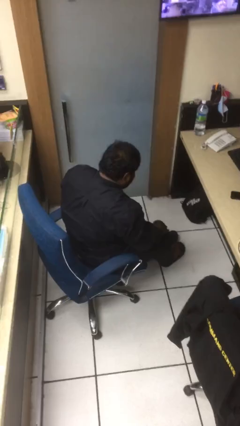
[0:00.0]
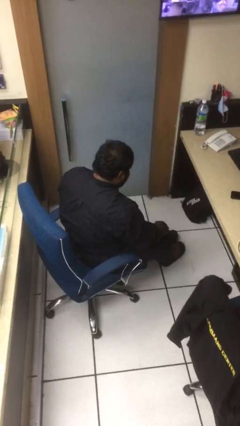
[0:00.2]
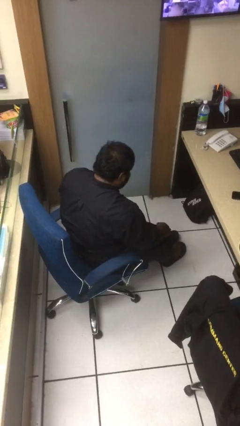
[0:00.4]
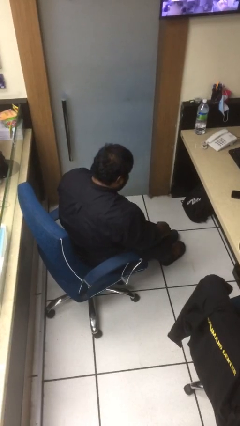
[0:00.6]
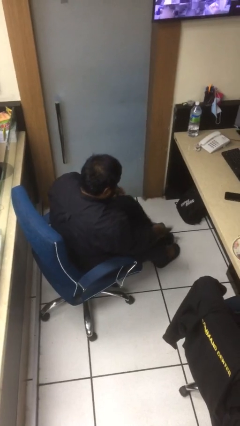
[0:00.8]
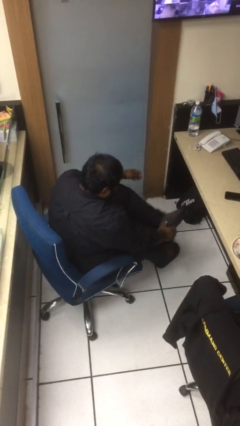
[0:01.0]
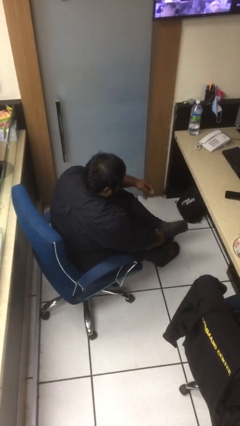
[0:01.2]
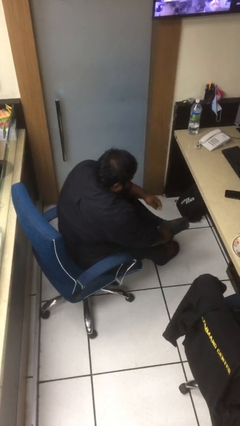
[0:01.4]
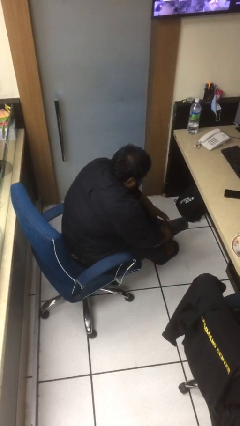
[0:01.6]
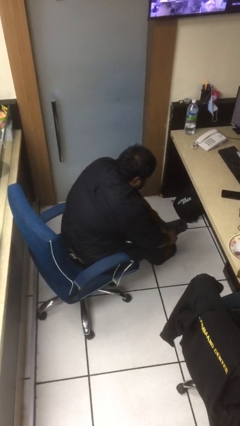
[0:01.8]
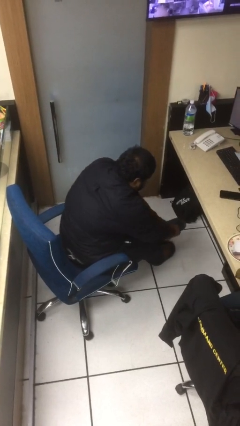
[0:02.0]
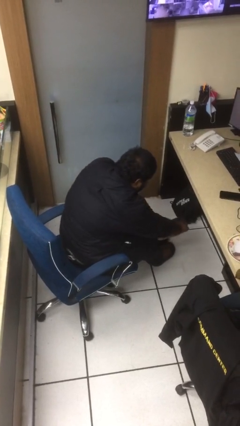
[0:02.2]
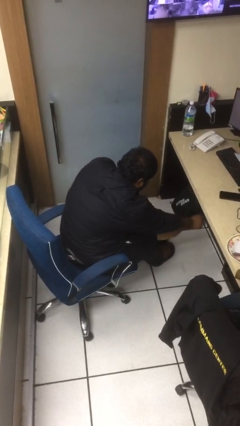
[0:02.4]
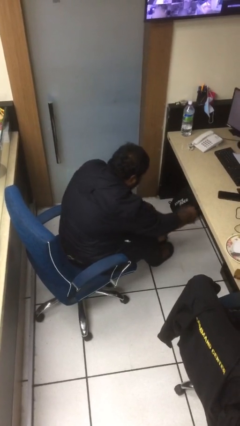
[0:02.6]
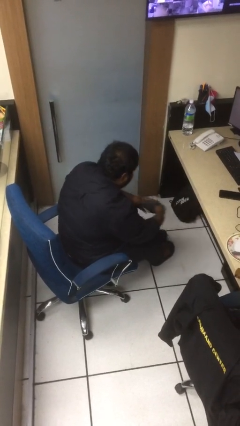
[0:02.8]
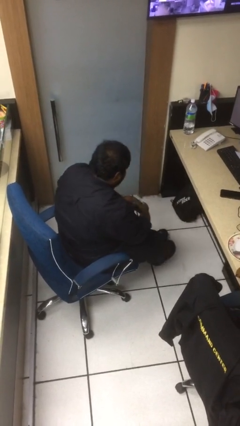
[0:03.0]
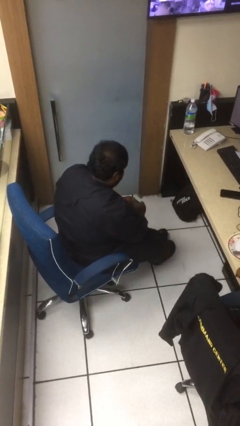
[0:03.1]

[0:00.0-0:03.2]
person takes off socks

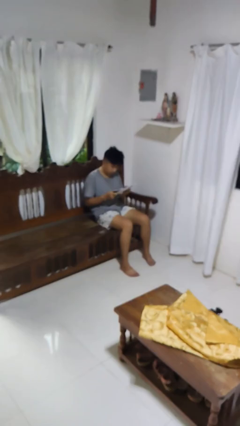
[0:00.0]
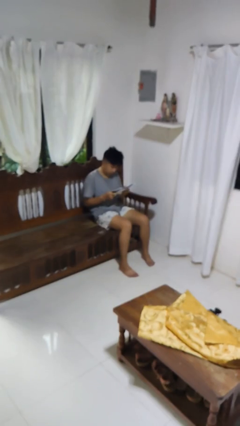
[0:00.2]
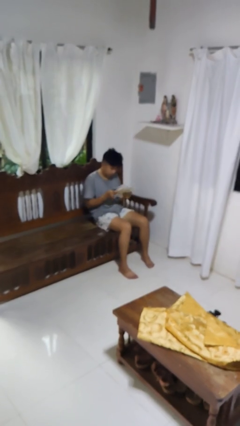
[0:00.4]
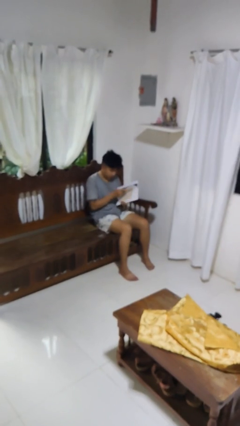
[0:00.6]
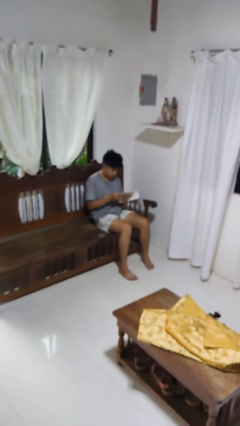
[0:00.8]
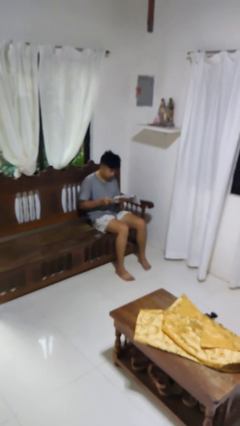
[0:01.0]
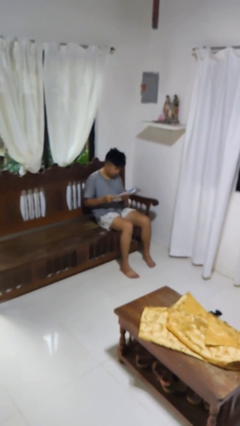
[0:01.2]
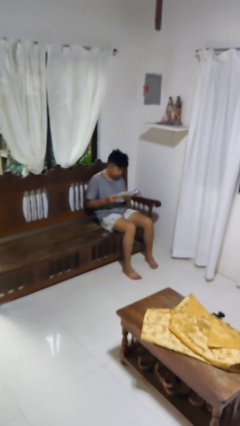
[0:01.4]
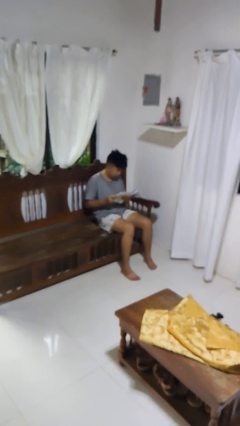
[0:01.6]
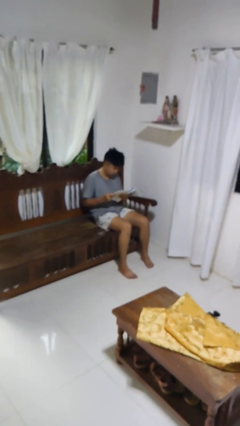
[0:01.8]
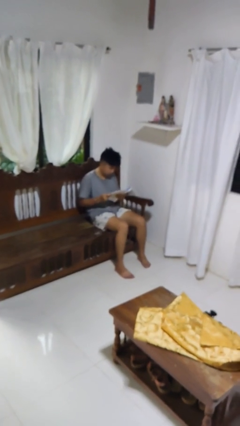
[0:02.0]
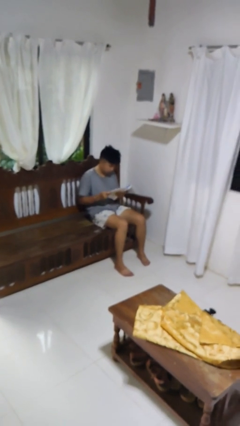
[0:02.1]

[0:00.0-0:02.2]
person reads newspaper

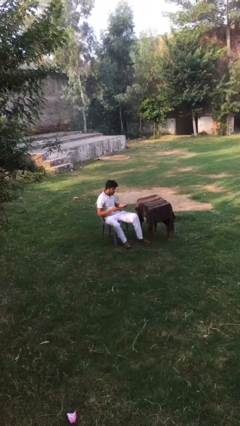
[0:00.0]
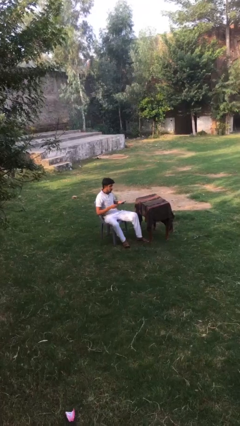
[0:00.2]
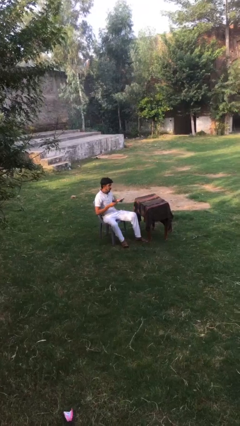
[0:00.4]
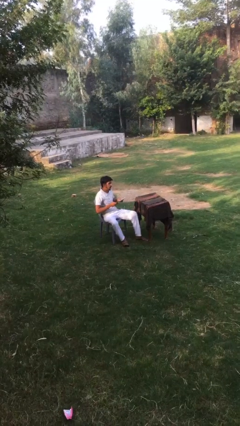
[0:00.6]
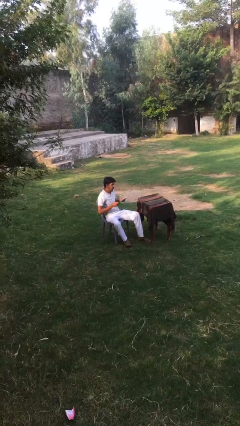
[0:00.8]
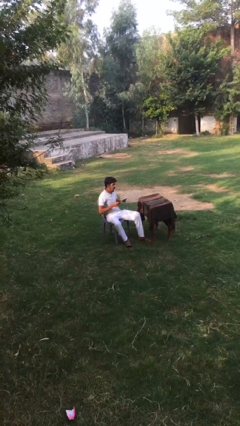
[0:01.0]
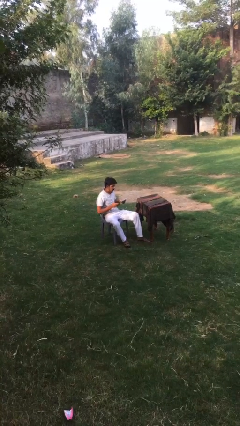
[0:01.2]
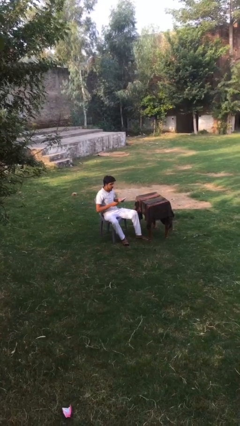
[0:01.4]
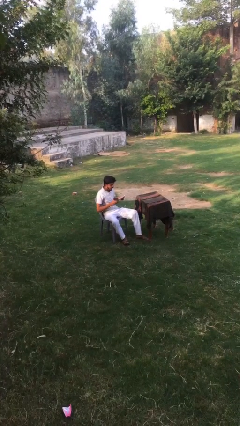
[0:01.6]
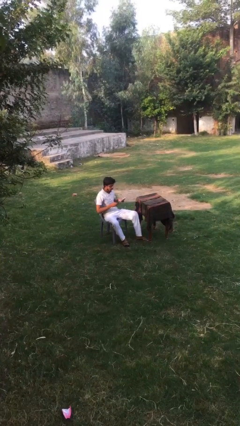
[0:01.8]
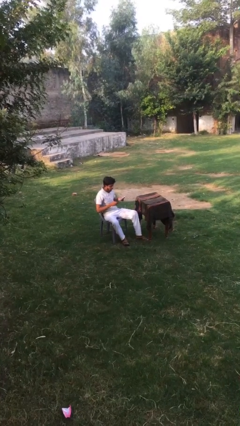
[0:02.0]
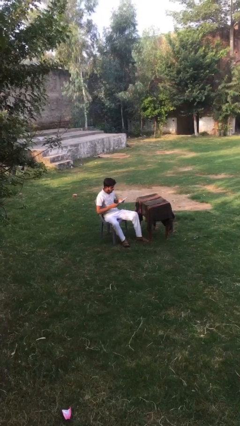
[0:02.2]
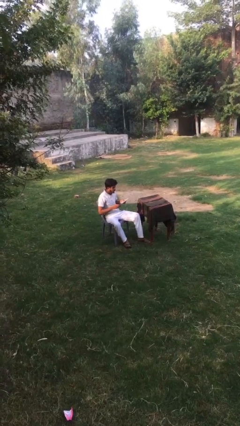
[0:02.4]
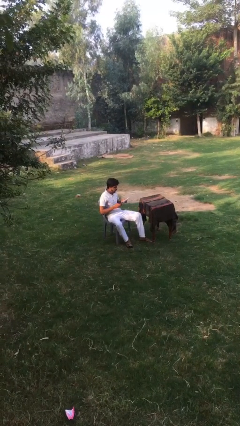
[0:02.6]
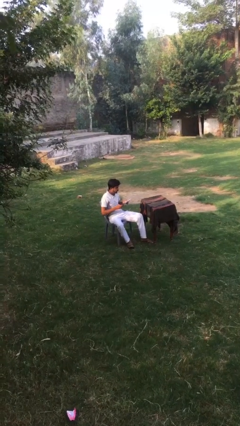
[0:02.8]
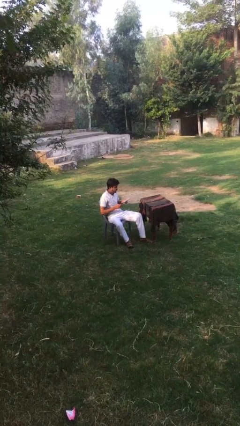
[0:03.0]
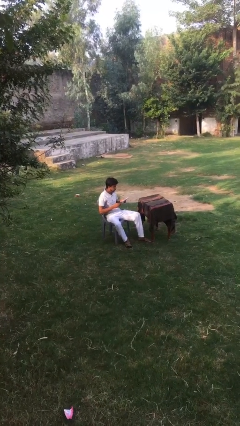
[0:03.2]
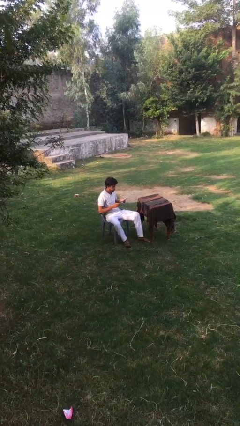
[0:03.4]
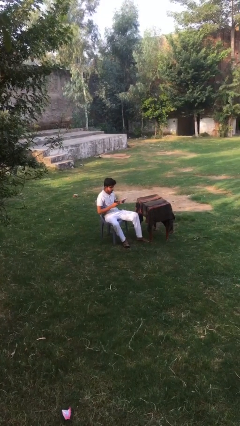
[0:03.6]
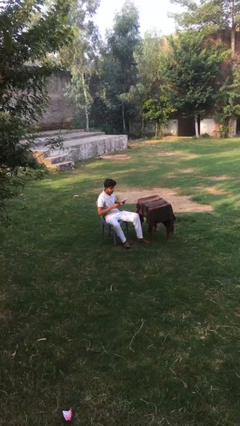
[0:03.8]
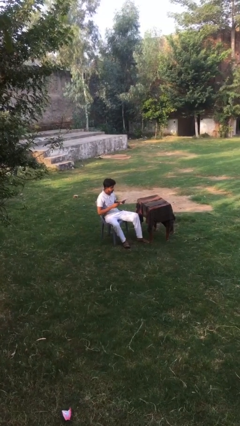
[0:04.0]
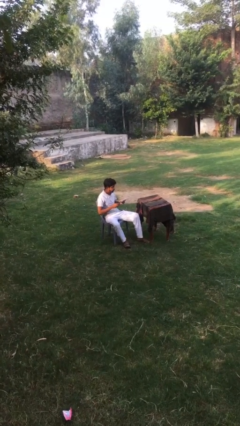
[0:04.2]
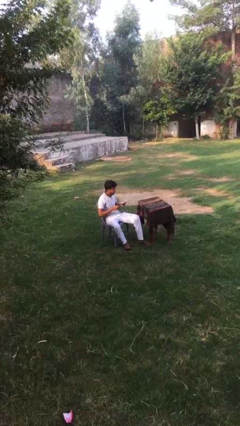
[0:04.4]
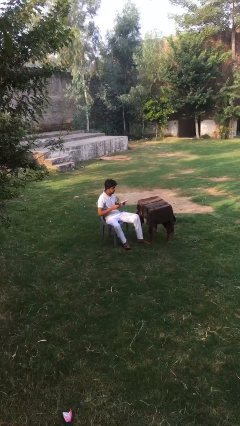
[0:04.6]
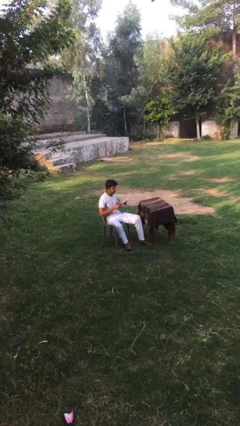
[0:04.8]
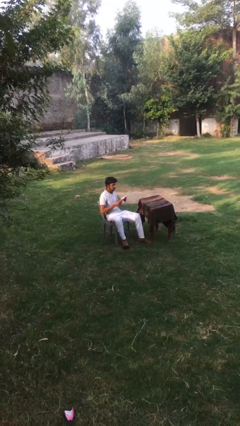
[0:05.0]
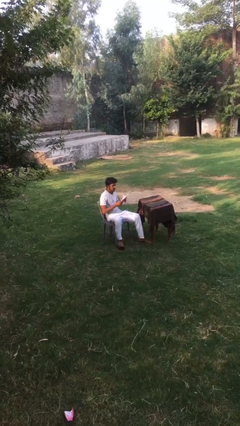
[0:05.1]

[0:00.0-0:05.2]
person reads document

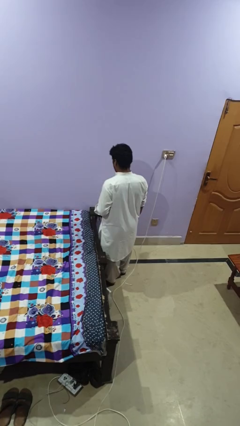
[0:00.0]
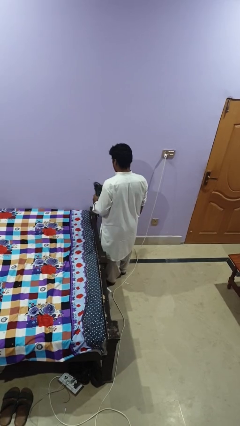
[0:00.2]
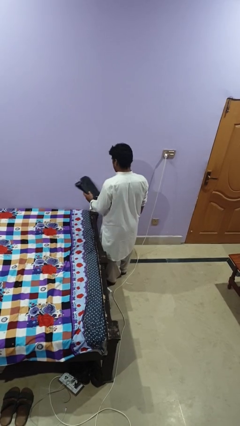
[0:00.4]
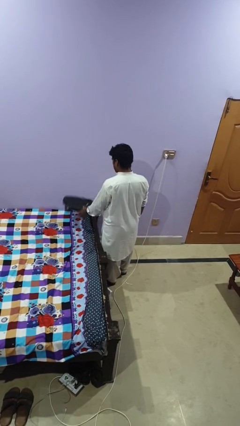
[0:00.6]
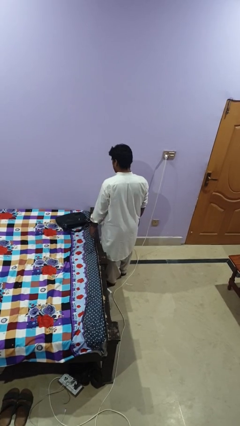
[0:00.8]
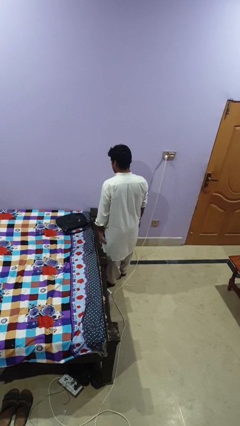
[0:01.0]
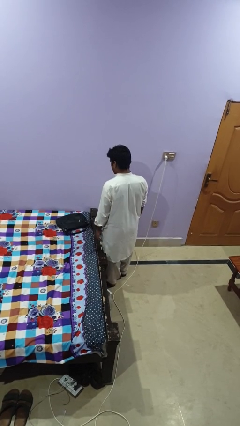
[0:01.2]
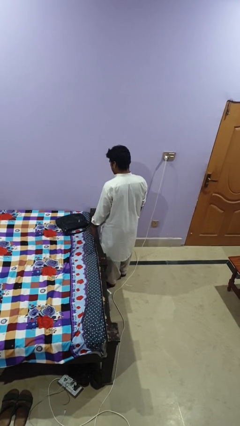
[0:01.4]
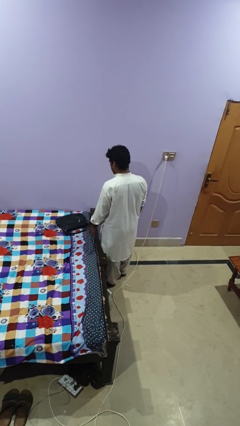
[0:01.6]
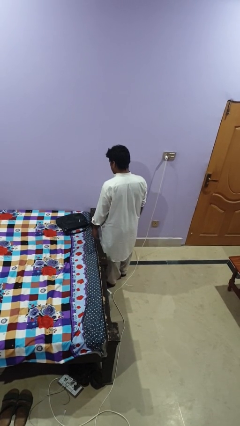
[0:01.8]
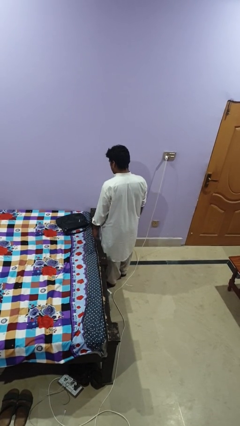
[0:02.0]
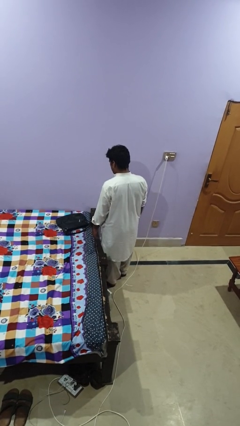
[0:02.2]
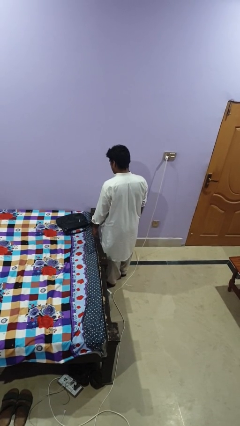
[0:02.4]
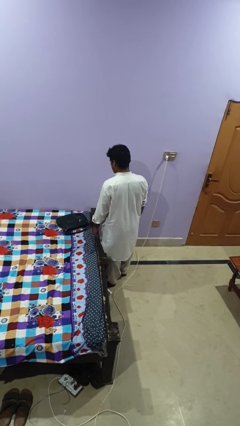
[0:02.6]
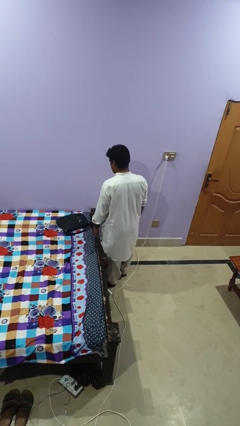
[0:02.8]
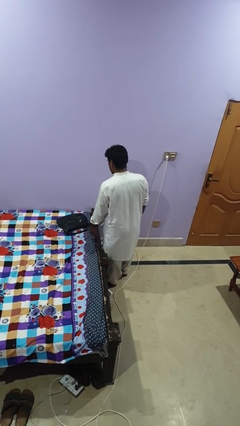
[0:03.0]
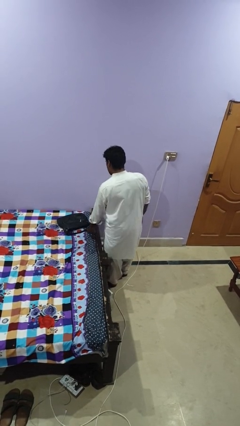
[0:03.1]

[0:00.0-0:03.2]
person throws object on bed

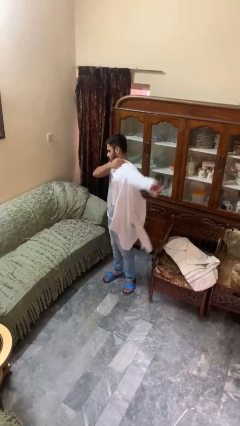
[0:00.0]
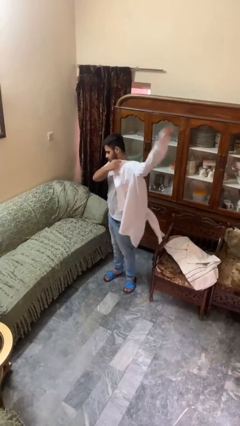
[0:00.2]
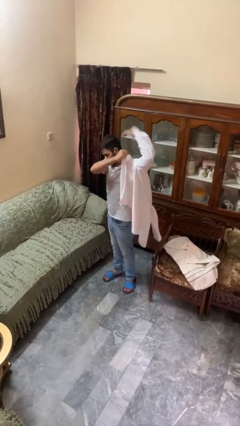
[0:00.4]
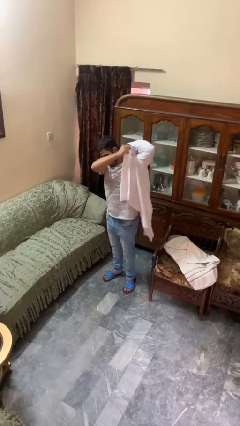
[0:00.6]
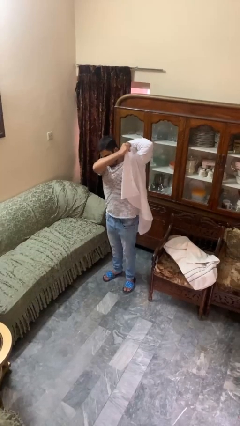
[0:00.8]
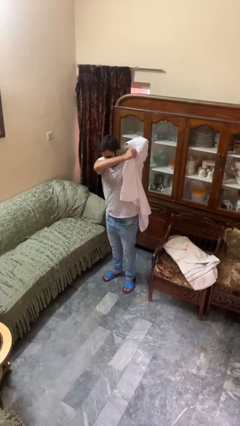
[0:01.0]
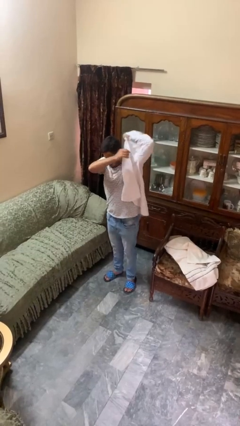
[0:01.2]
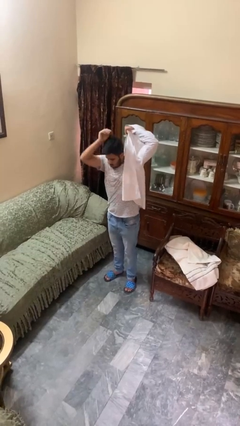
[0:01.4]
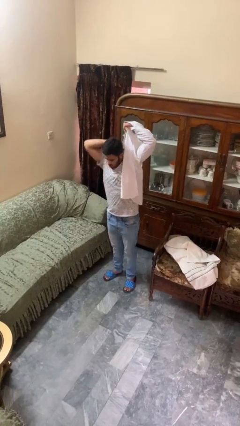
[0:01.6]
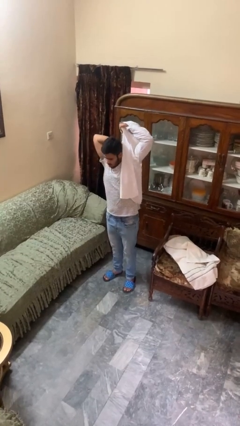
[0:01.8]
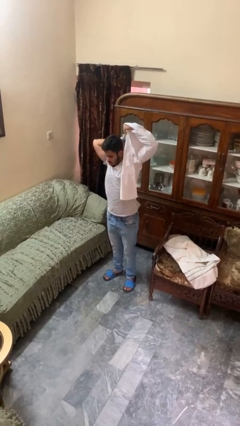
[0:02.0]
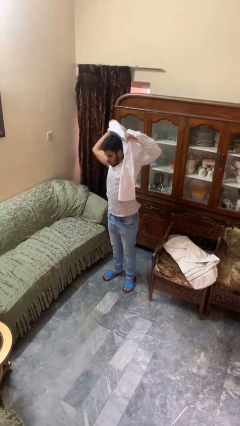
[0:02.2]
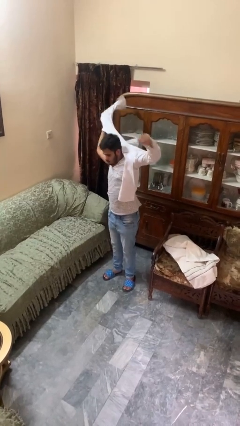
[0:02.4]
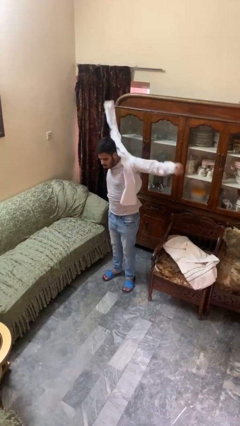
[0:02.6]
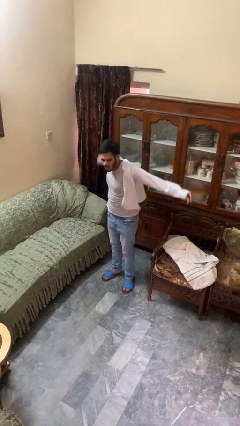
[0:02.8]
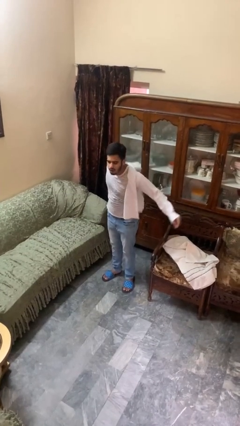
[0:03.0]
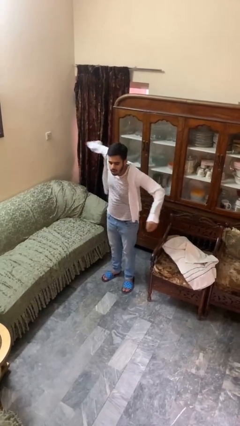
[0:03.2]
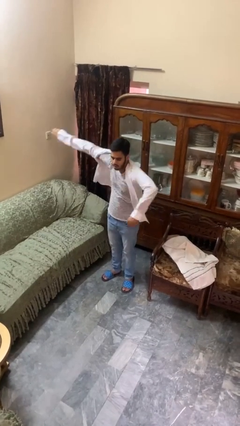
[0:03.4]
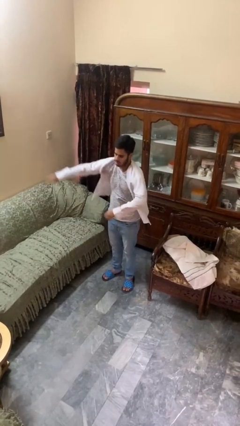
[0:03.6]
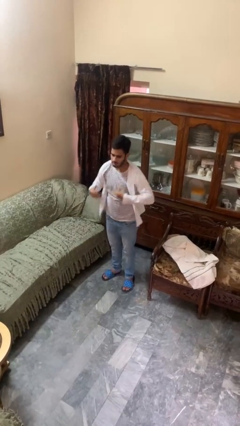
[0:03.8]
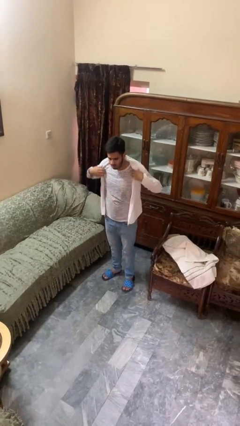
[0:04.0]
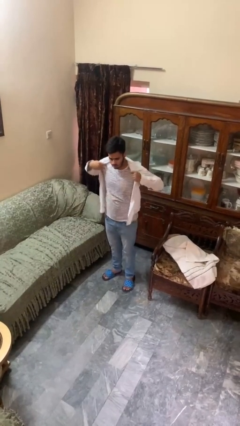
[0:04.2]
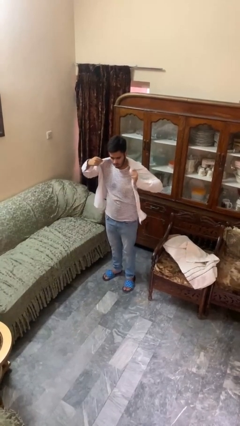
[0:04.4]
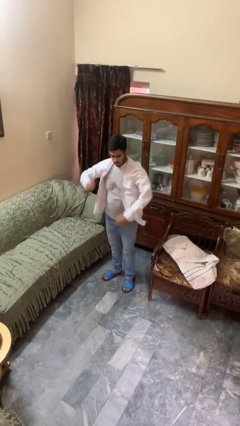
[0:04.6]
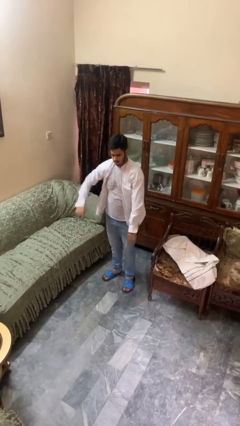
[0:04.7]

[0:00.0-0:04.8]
person puts on shirt
